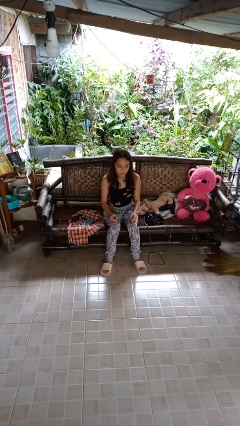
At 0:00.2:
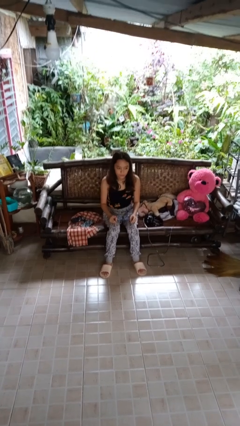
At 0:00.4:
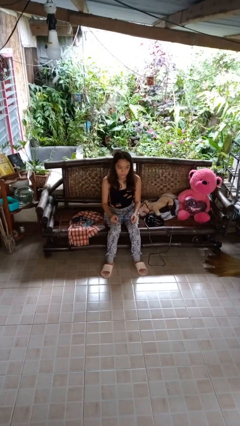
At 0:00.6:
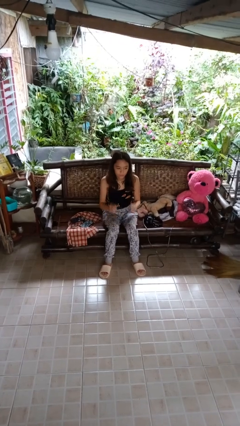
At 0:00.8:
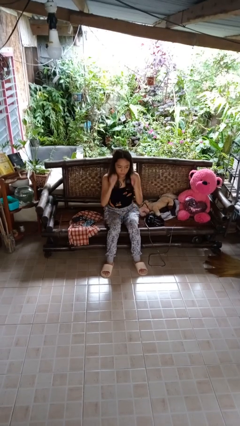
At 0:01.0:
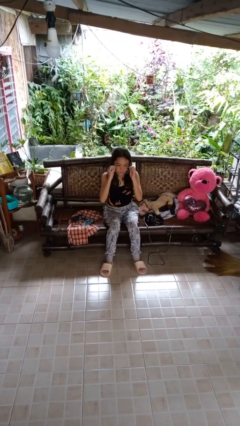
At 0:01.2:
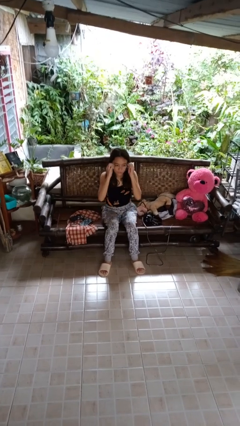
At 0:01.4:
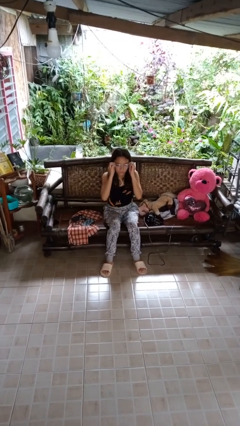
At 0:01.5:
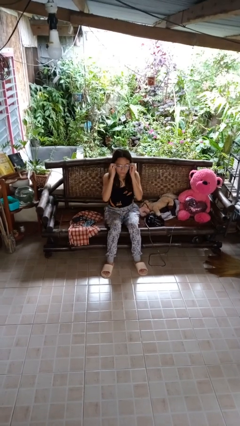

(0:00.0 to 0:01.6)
person puts on glasses

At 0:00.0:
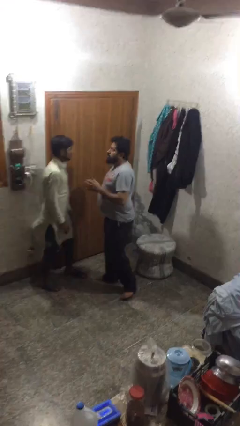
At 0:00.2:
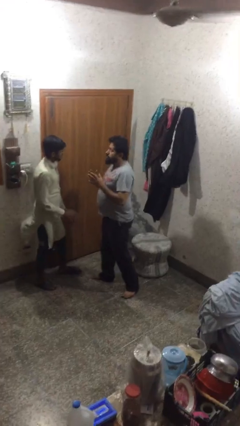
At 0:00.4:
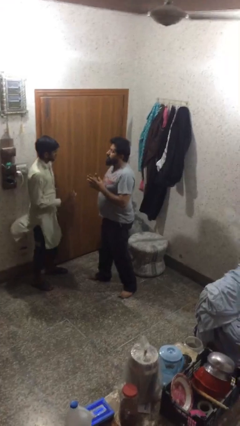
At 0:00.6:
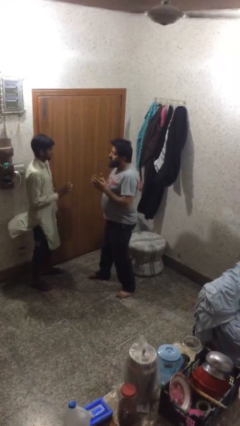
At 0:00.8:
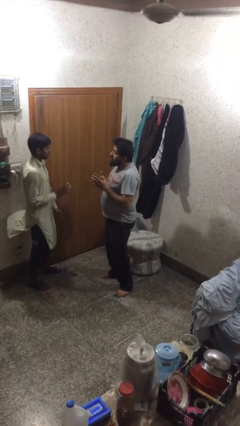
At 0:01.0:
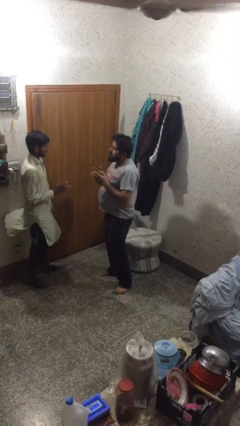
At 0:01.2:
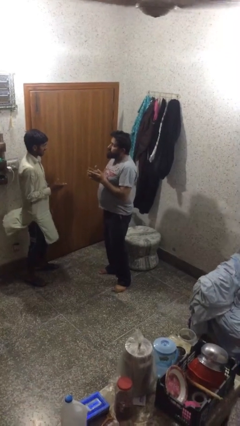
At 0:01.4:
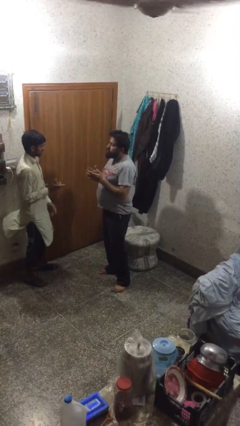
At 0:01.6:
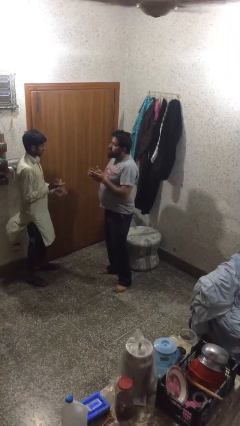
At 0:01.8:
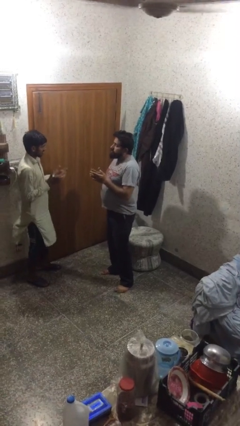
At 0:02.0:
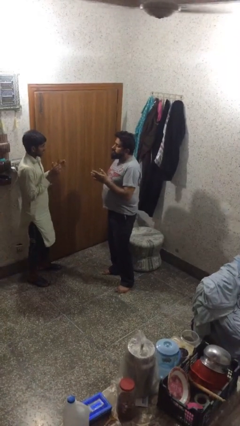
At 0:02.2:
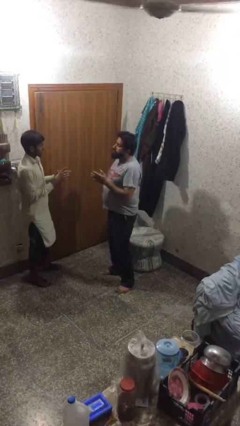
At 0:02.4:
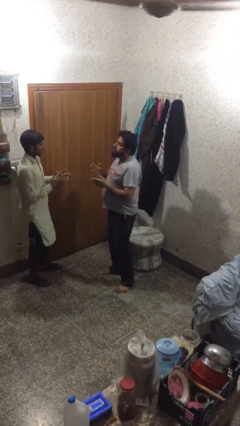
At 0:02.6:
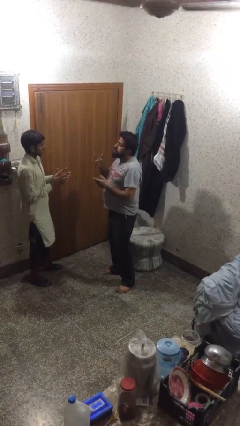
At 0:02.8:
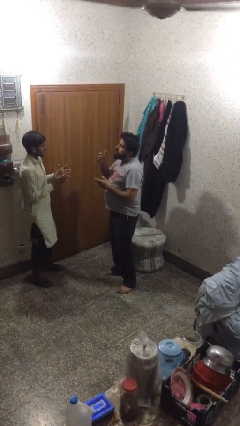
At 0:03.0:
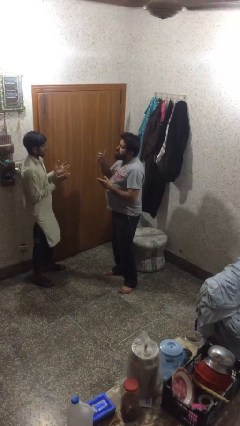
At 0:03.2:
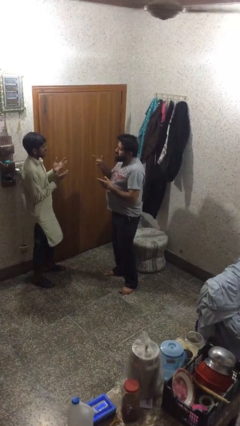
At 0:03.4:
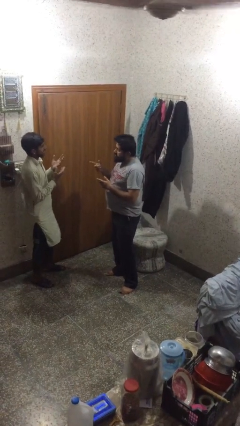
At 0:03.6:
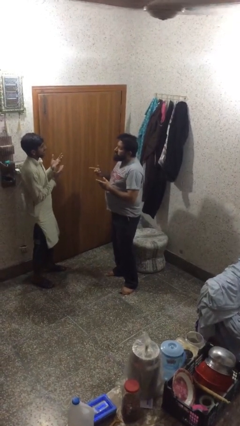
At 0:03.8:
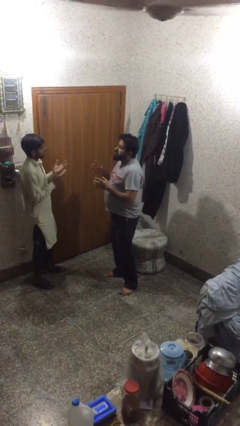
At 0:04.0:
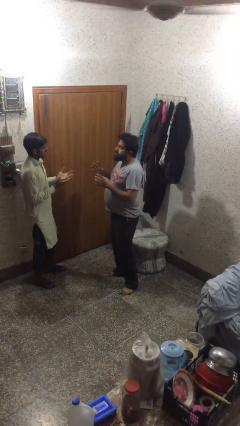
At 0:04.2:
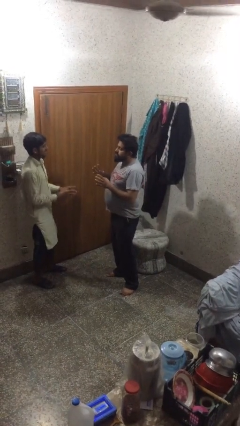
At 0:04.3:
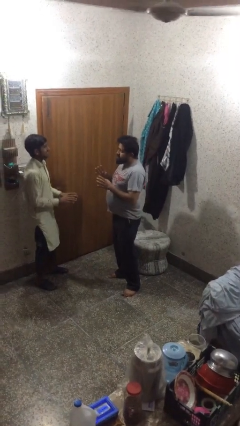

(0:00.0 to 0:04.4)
person talks to person

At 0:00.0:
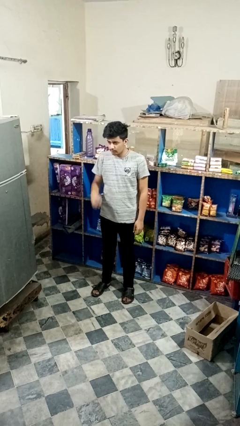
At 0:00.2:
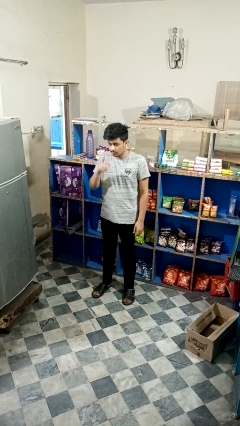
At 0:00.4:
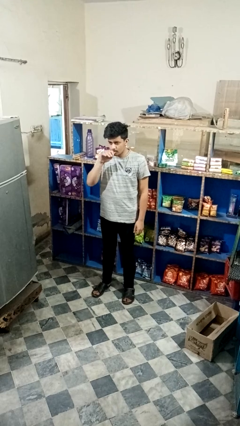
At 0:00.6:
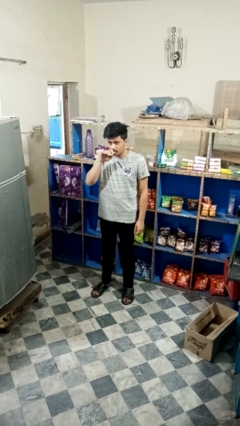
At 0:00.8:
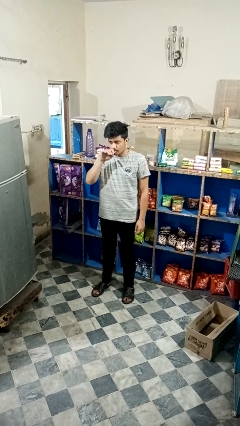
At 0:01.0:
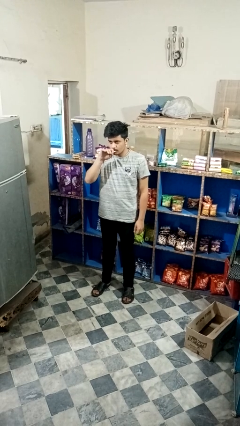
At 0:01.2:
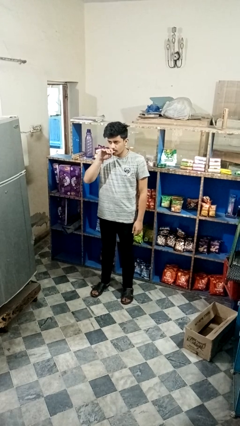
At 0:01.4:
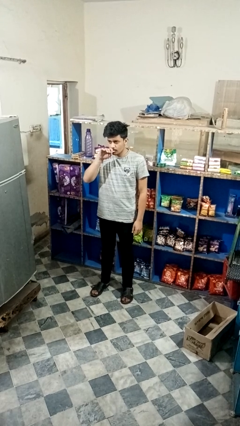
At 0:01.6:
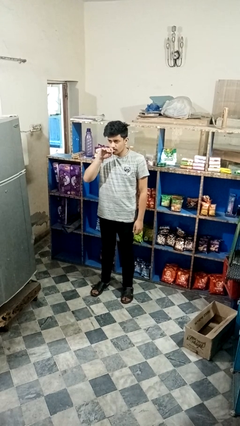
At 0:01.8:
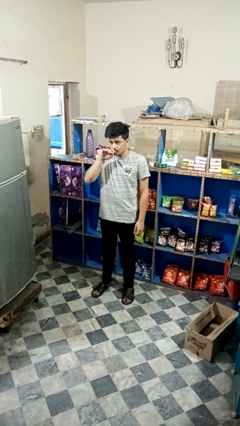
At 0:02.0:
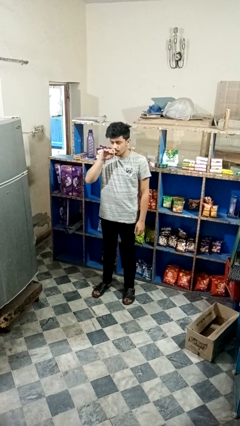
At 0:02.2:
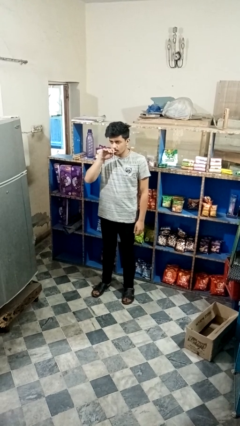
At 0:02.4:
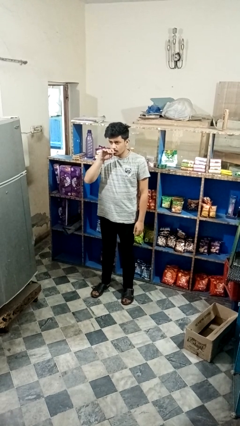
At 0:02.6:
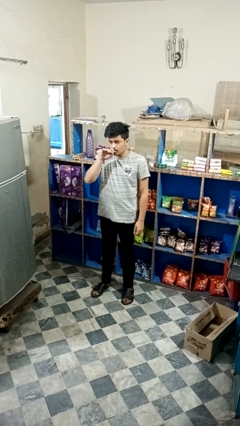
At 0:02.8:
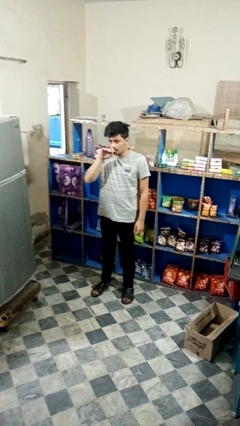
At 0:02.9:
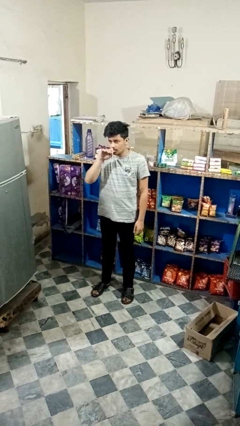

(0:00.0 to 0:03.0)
person vapes

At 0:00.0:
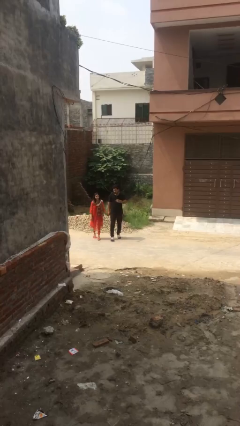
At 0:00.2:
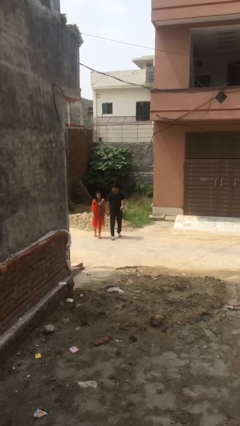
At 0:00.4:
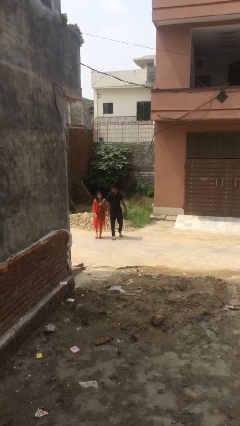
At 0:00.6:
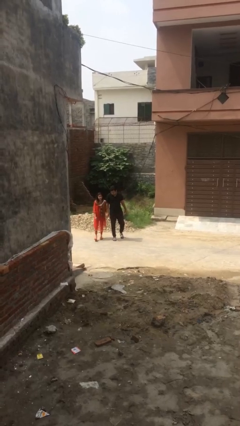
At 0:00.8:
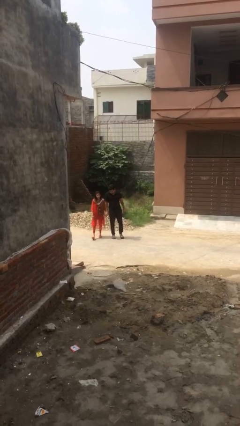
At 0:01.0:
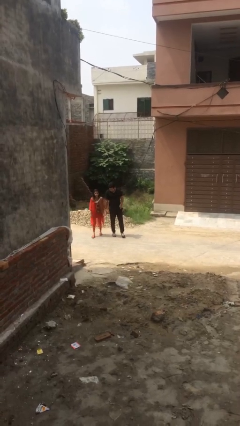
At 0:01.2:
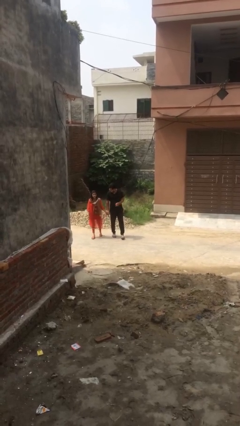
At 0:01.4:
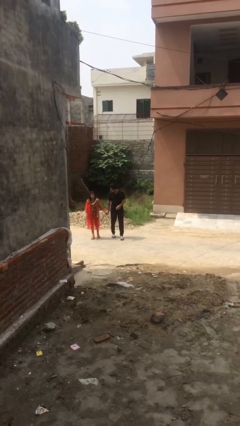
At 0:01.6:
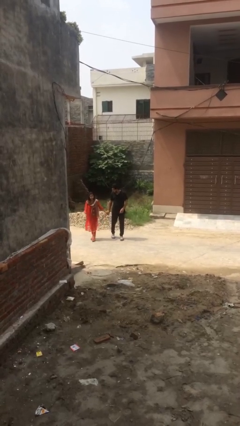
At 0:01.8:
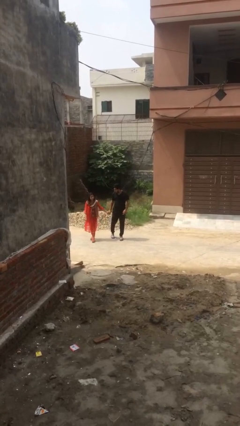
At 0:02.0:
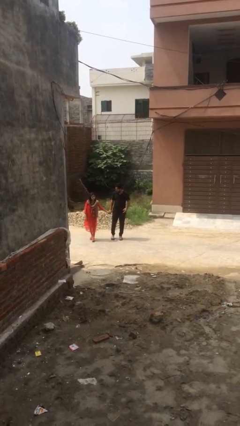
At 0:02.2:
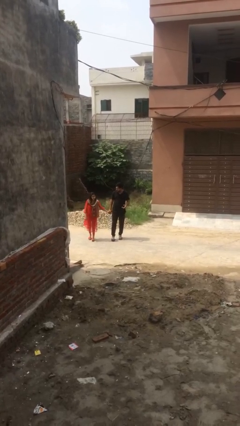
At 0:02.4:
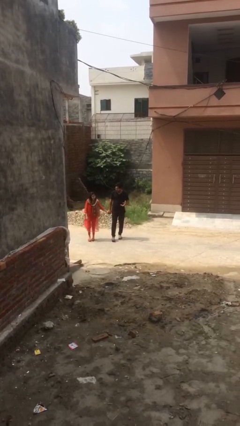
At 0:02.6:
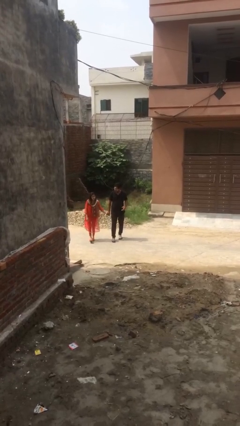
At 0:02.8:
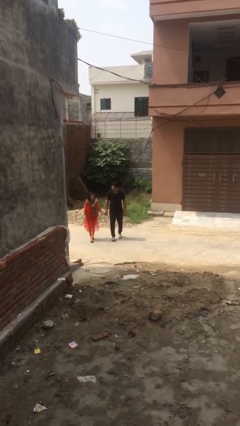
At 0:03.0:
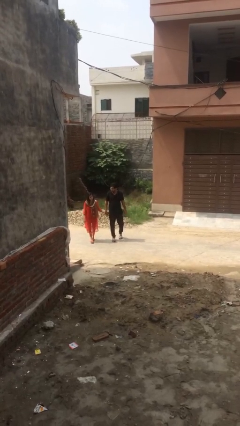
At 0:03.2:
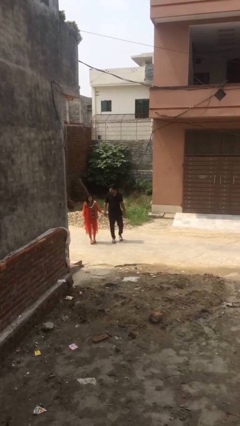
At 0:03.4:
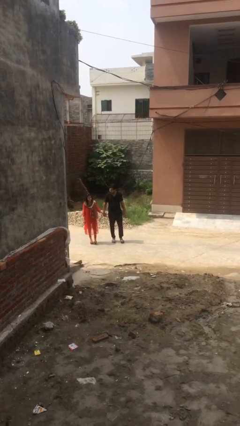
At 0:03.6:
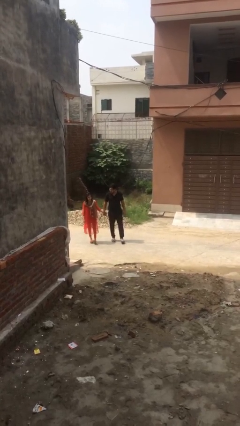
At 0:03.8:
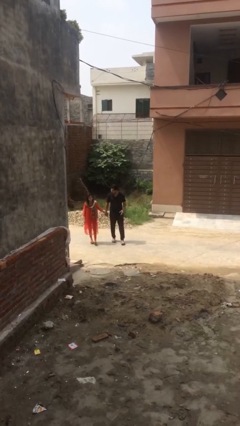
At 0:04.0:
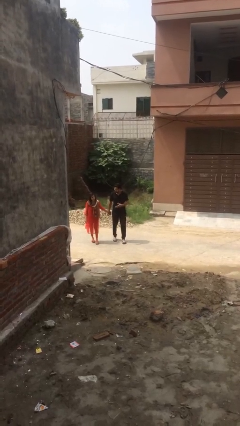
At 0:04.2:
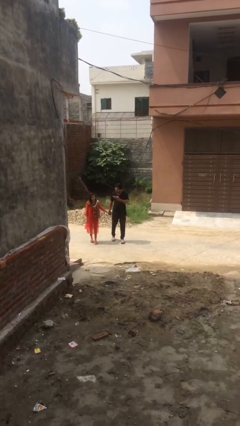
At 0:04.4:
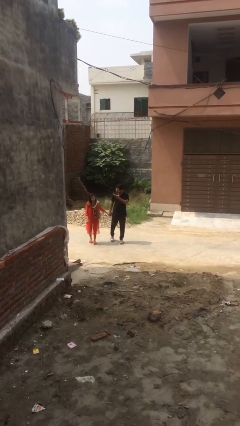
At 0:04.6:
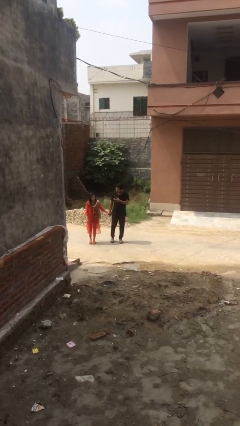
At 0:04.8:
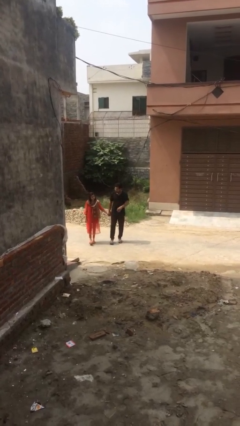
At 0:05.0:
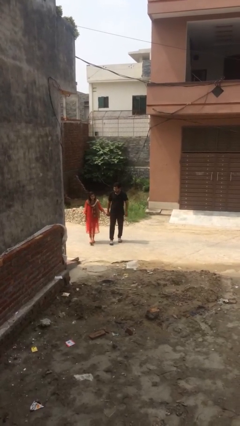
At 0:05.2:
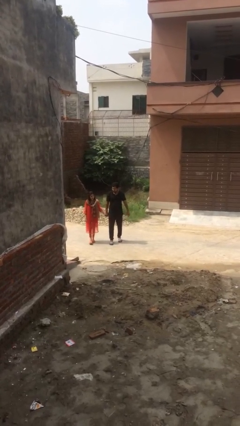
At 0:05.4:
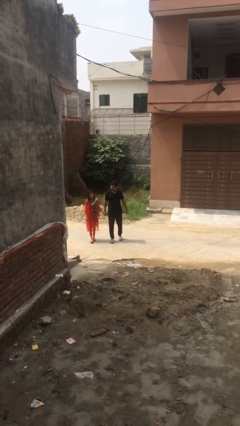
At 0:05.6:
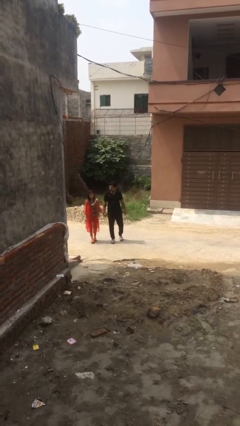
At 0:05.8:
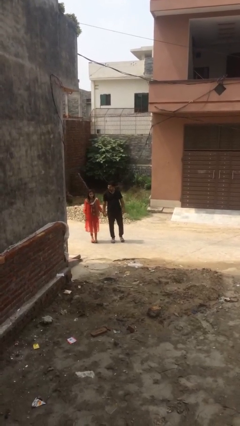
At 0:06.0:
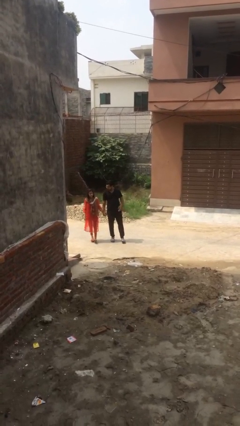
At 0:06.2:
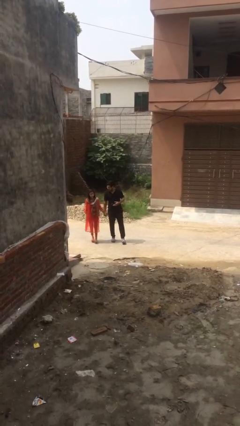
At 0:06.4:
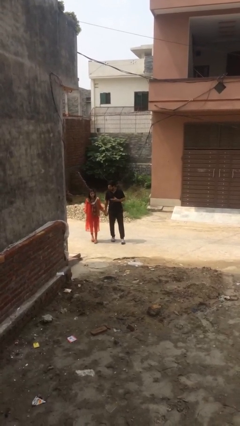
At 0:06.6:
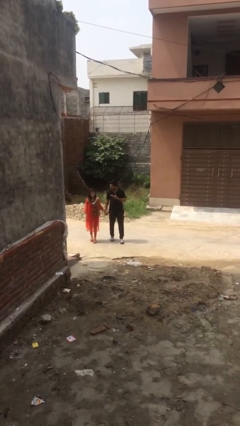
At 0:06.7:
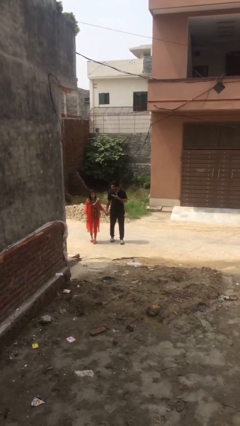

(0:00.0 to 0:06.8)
person holds hand

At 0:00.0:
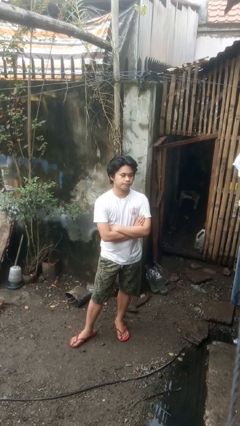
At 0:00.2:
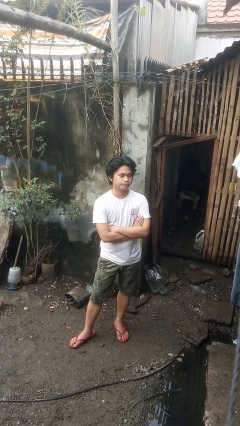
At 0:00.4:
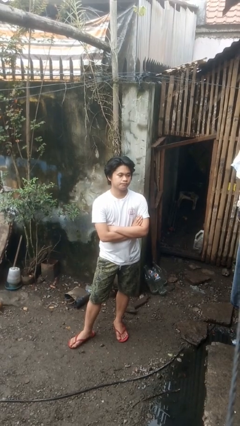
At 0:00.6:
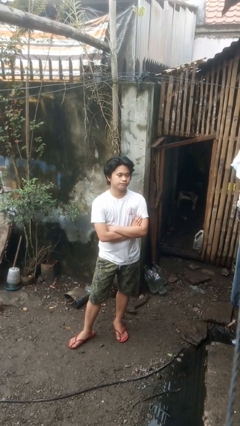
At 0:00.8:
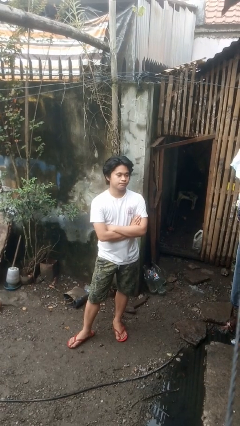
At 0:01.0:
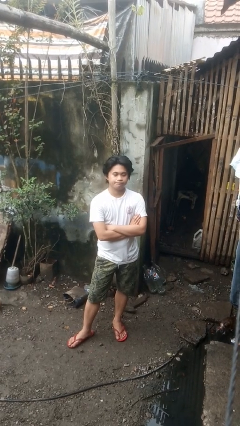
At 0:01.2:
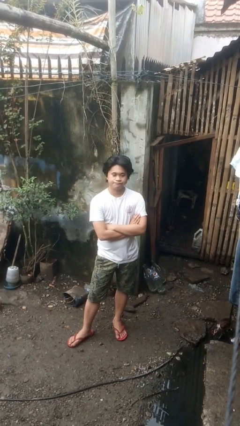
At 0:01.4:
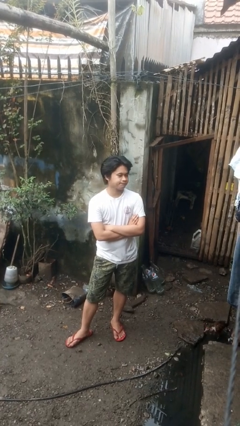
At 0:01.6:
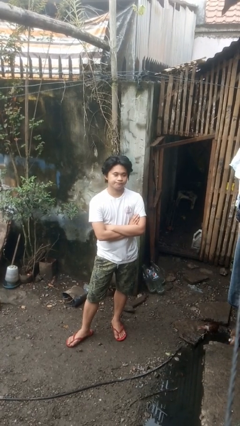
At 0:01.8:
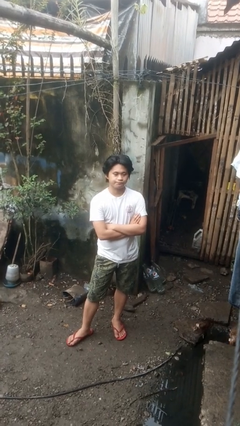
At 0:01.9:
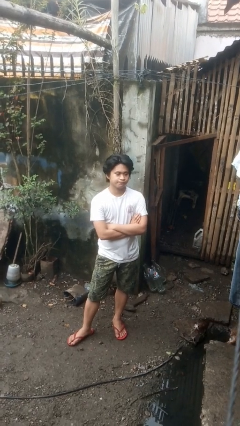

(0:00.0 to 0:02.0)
person shakes head
